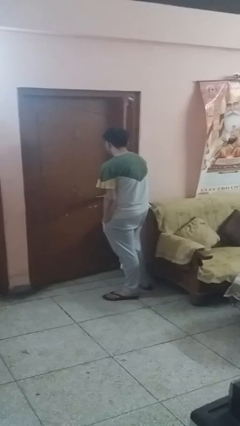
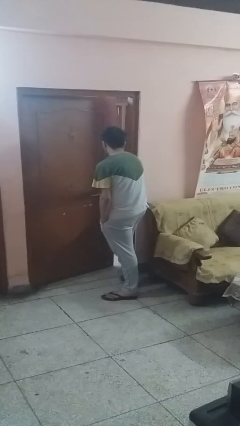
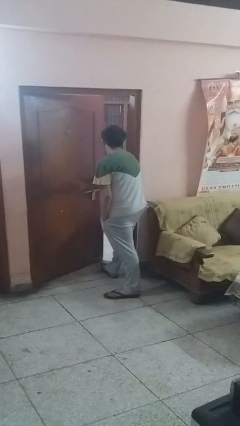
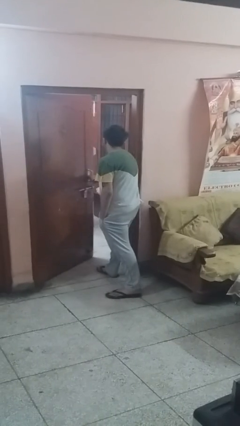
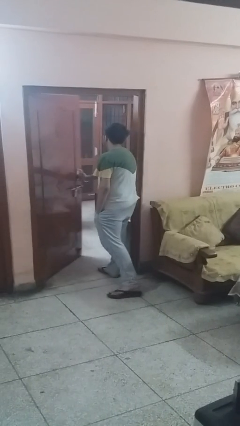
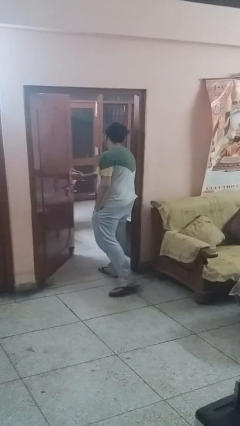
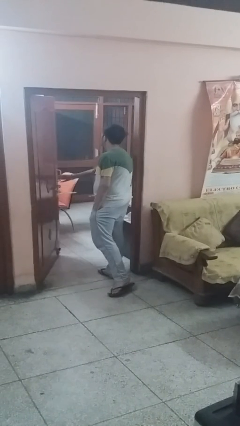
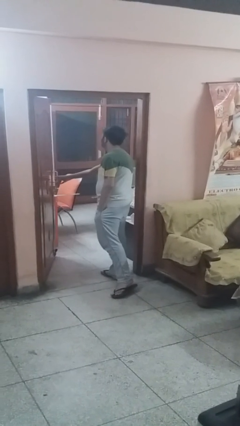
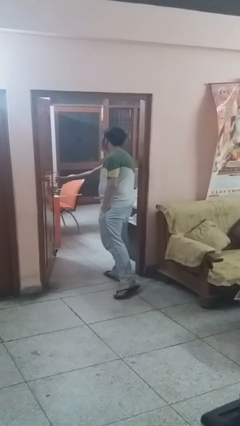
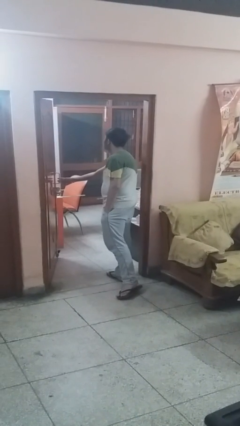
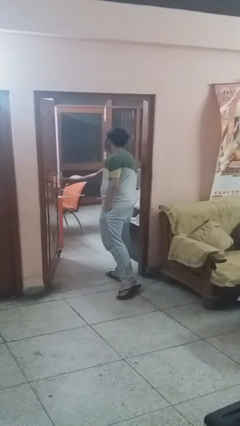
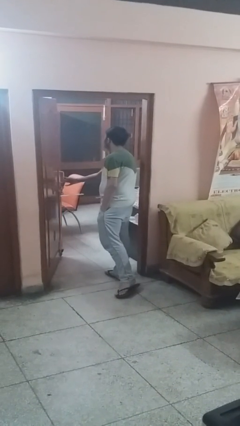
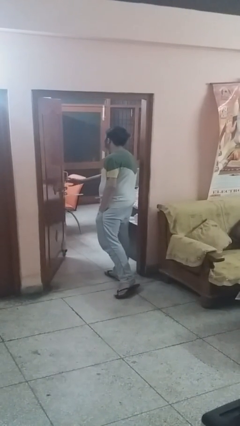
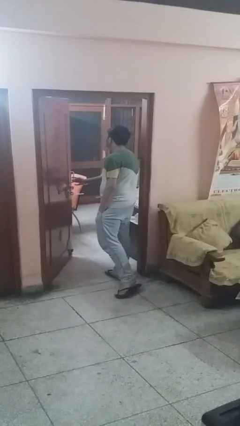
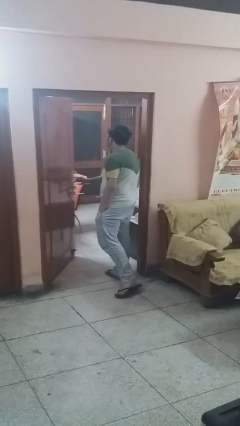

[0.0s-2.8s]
person opens facility door

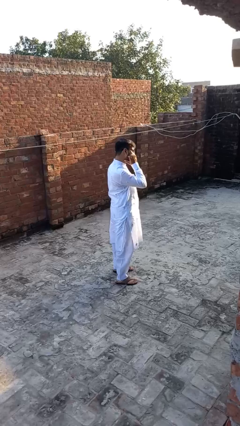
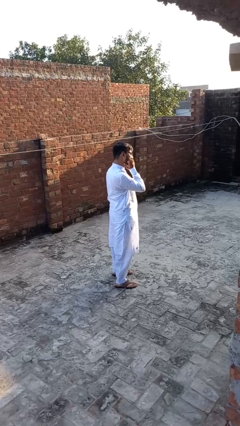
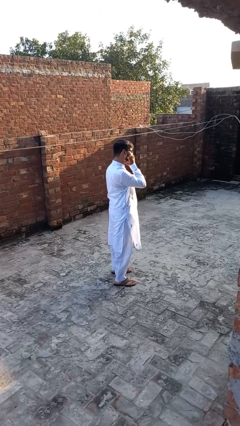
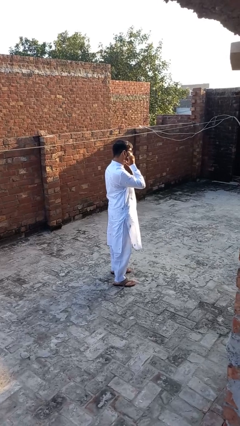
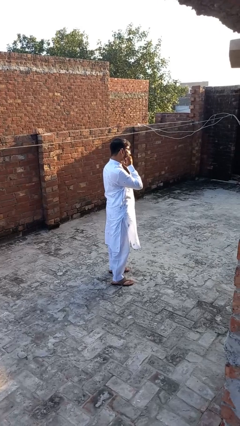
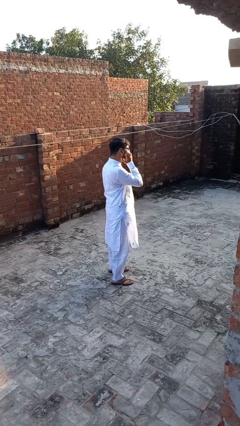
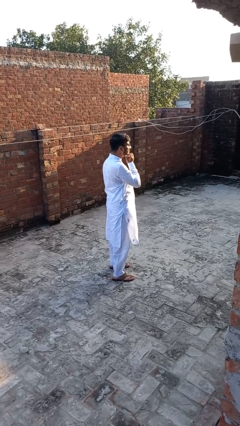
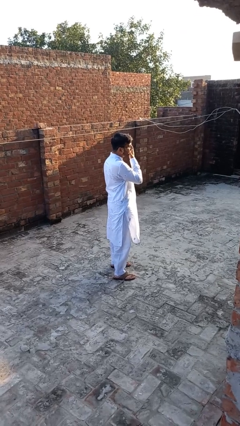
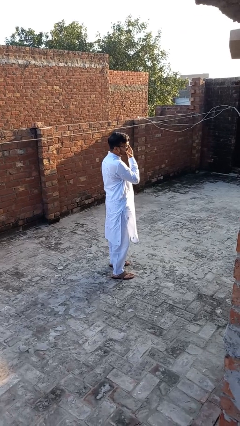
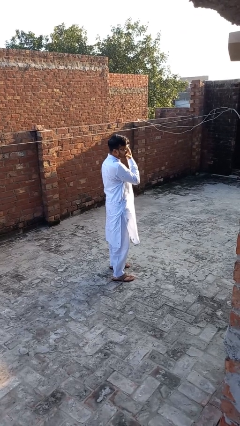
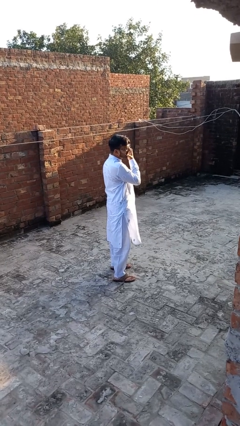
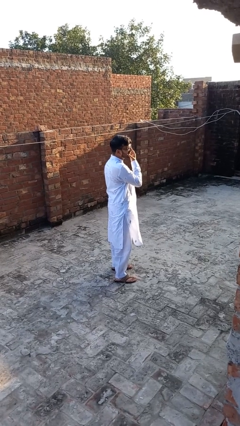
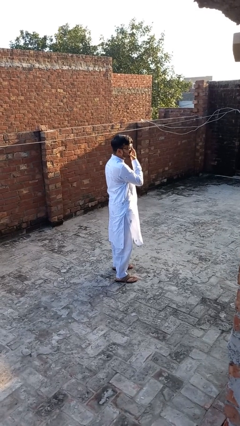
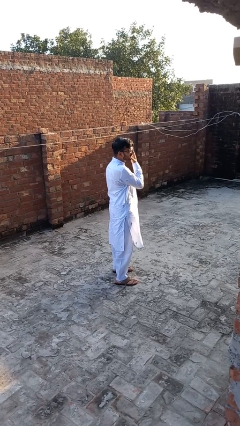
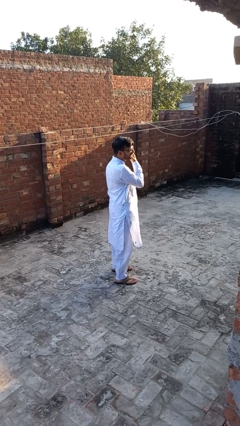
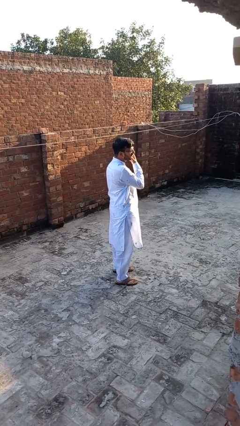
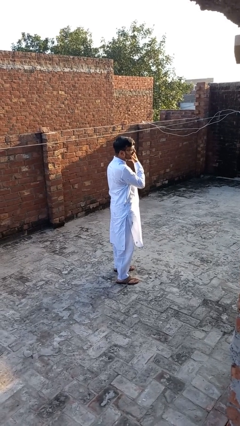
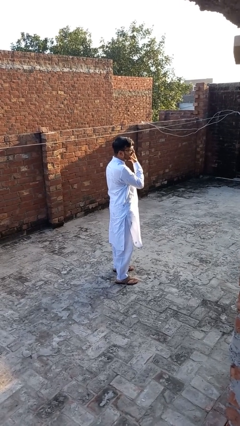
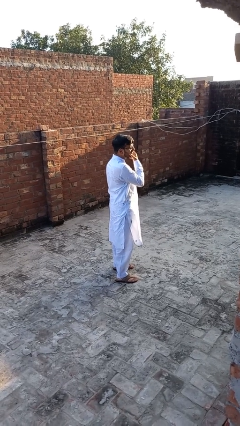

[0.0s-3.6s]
person scratches face

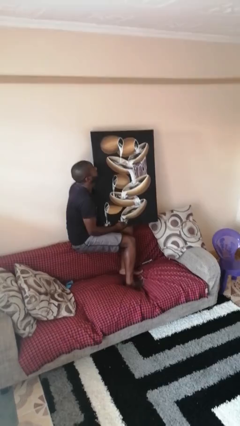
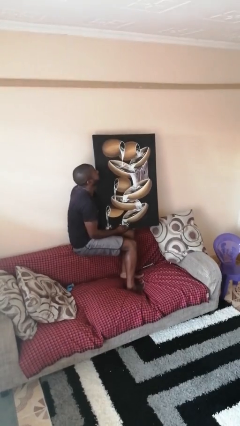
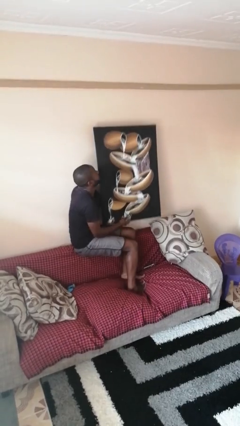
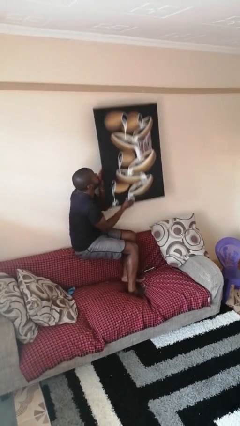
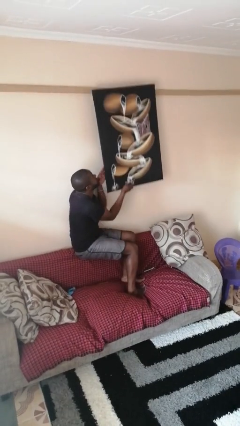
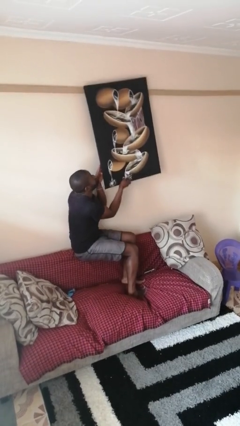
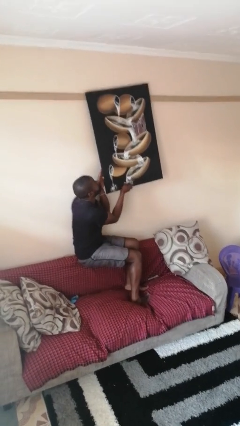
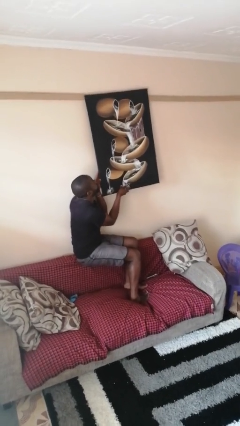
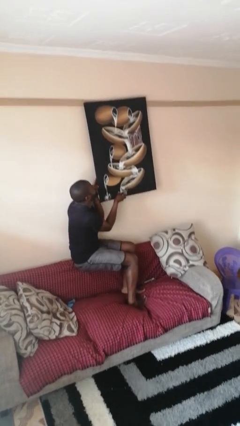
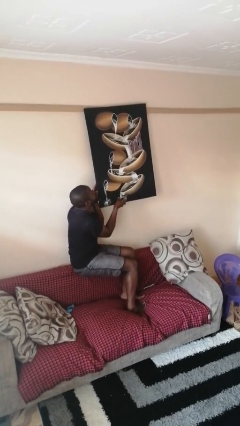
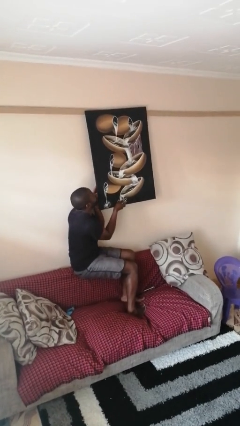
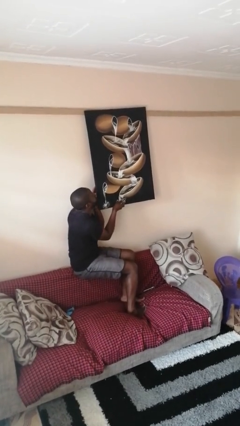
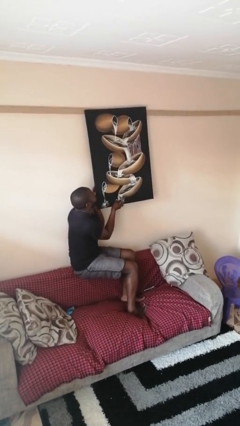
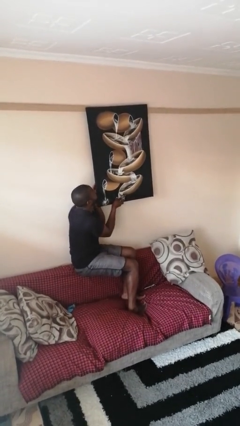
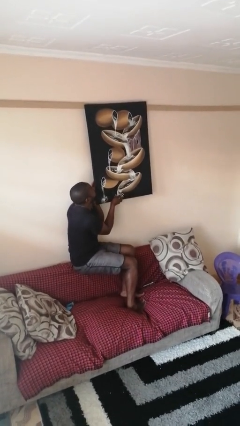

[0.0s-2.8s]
person puts up picture frame

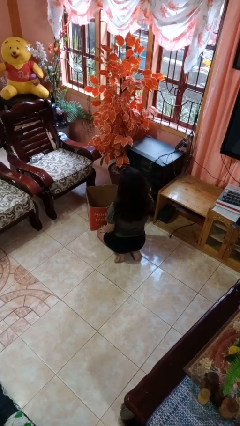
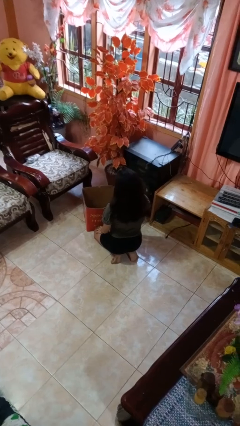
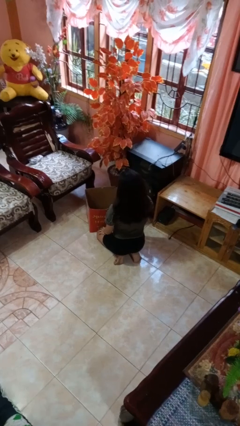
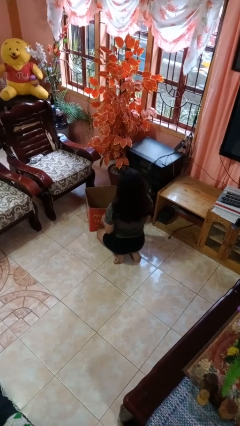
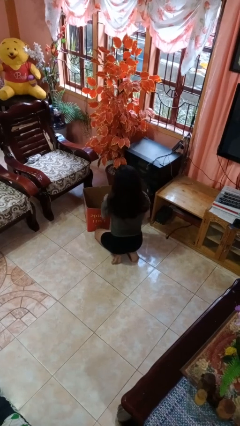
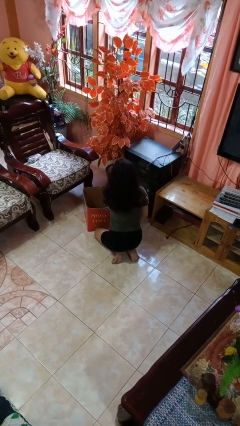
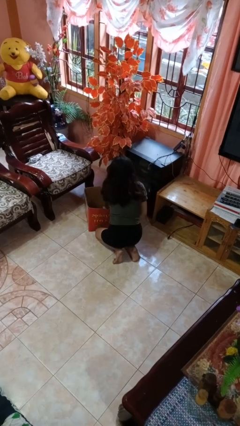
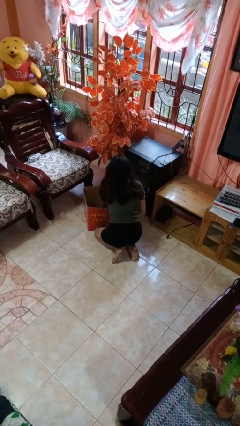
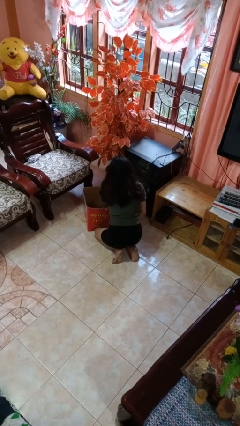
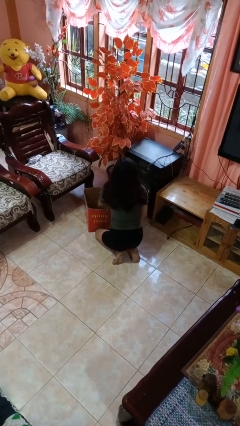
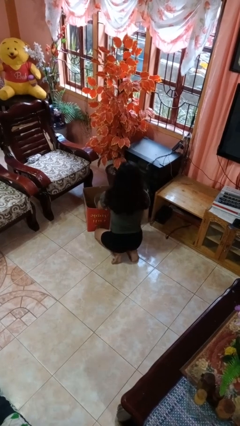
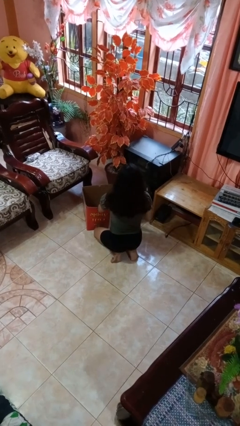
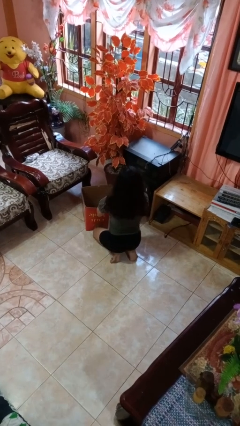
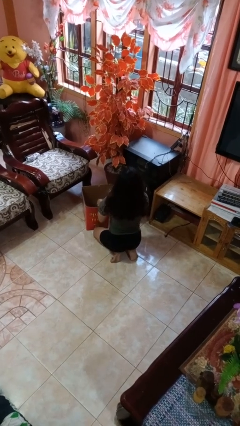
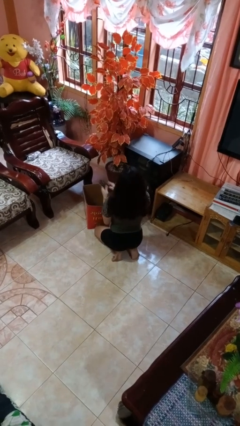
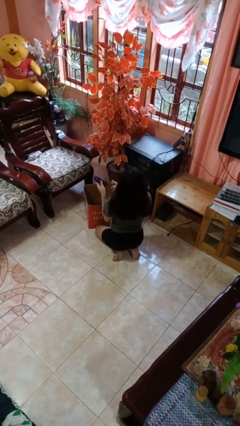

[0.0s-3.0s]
person takes object from box

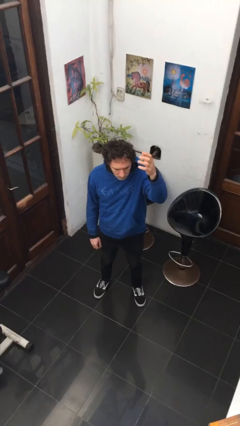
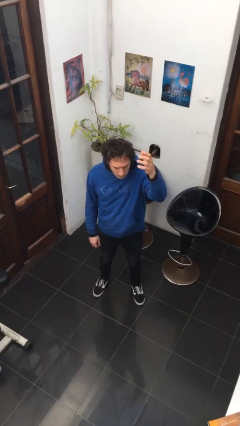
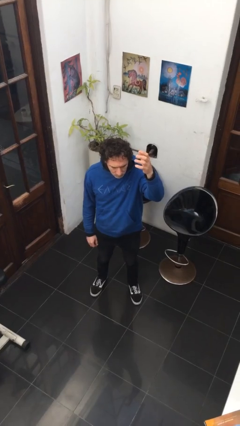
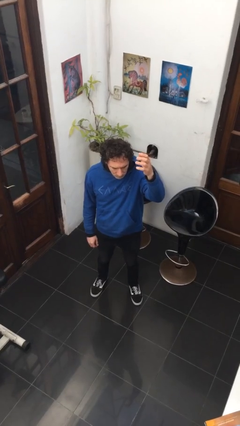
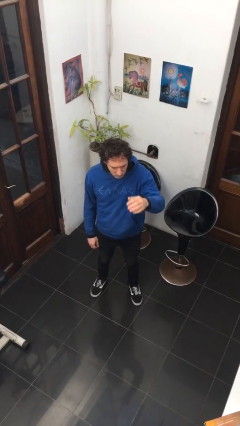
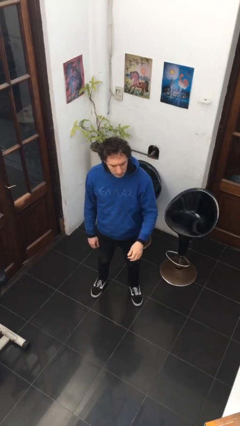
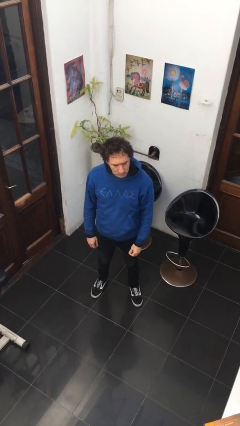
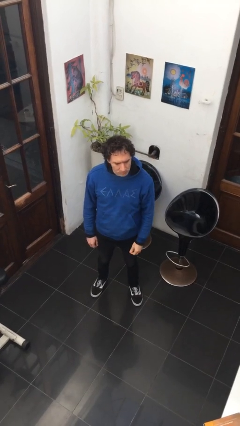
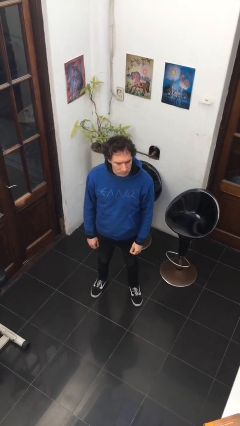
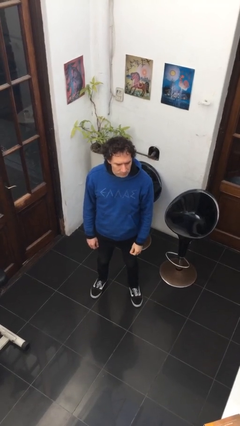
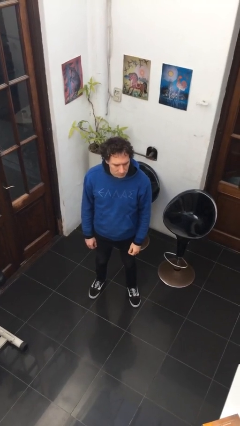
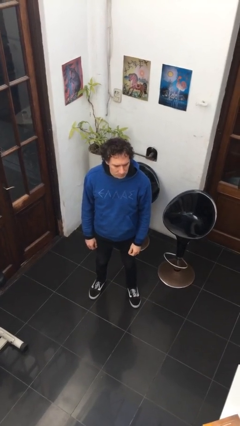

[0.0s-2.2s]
person gestures swipe down

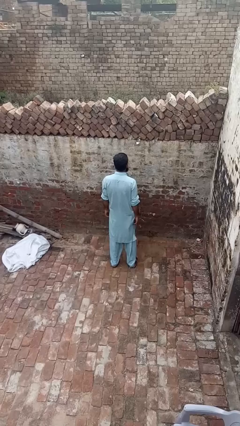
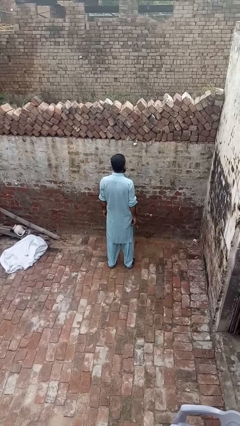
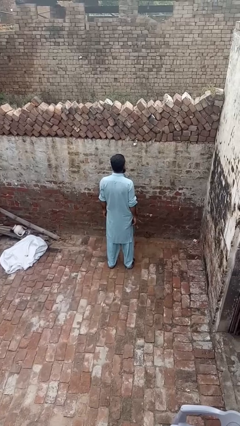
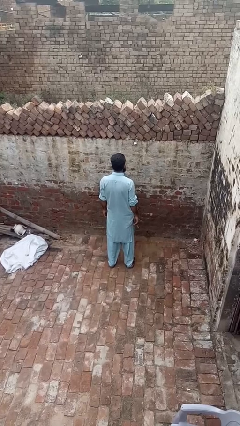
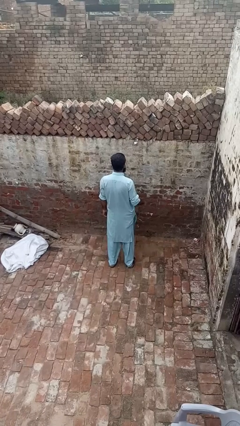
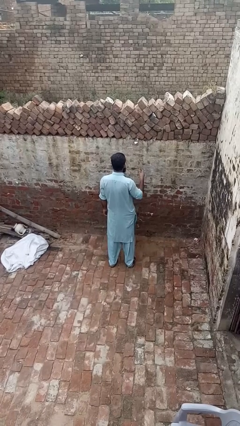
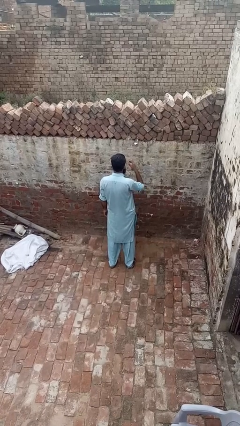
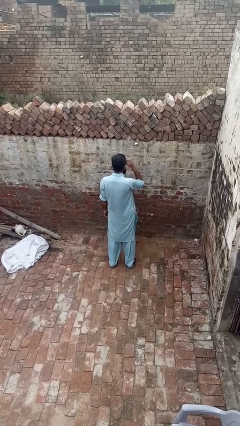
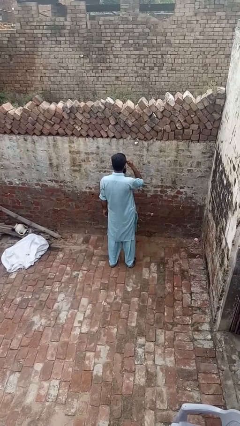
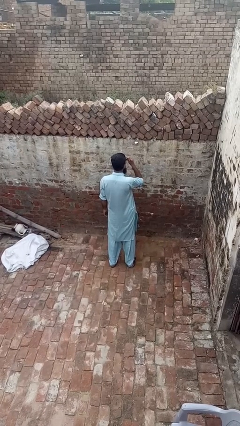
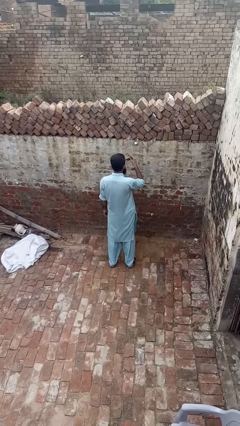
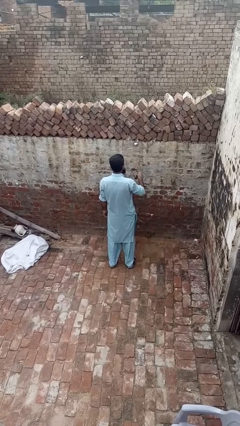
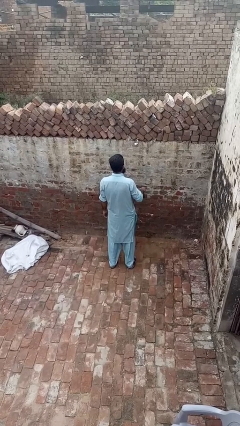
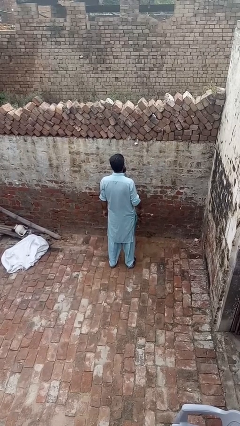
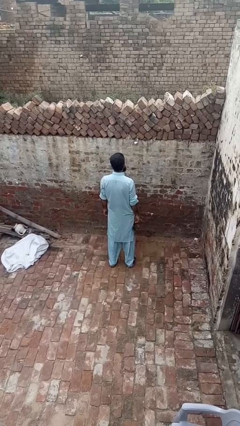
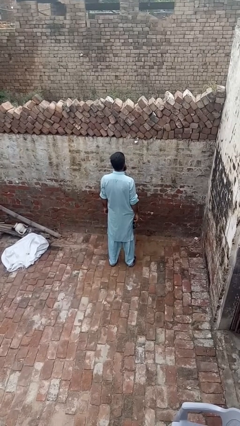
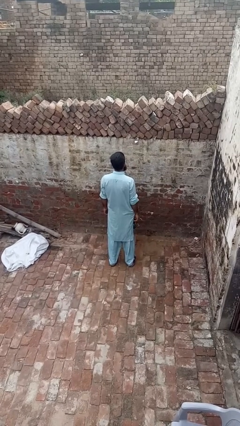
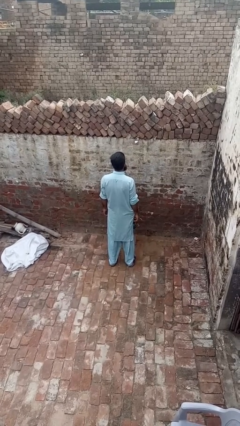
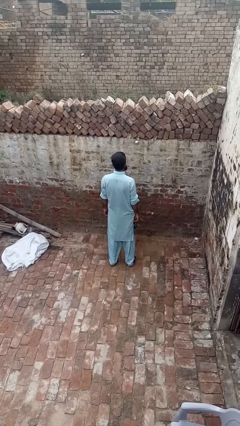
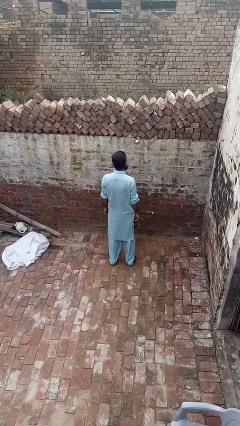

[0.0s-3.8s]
person takes off sunglasses
